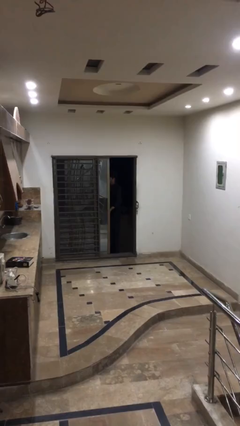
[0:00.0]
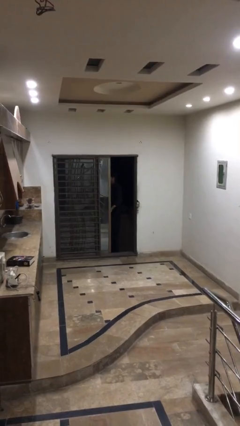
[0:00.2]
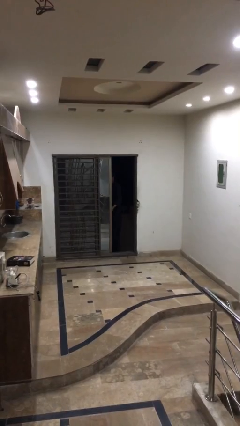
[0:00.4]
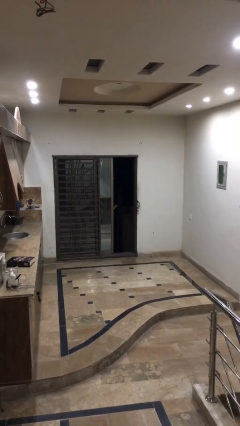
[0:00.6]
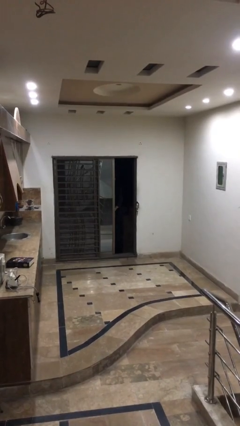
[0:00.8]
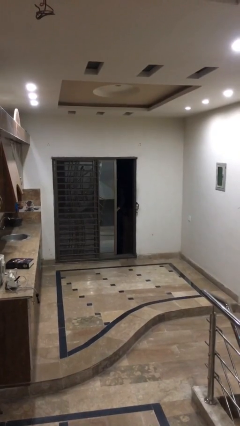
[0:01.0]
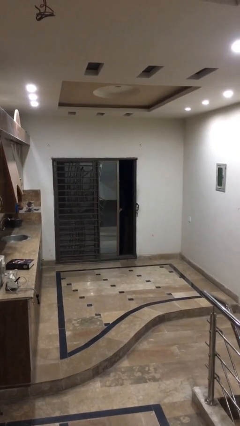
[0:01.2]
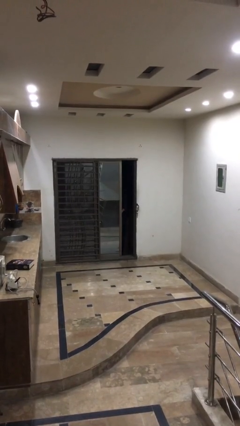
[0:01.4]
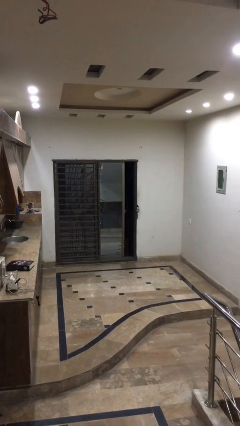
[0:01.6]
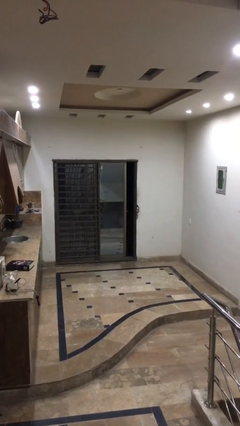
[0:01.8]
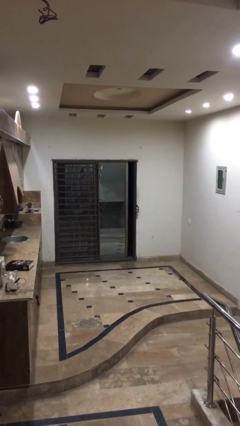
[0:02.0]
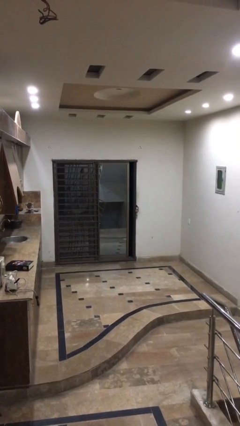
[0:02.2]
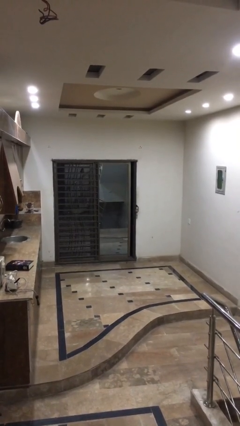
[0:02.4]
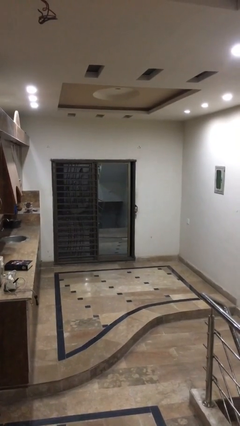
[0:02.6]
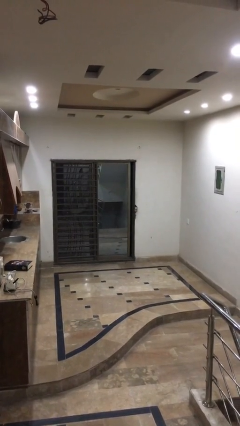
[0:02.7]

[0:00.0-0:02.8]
person closes facility door

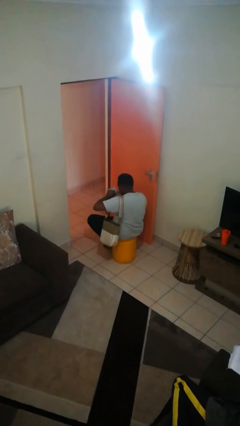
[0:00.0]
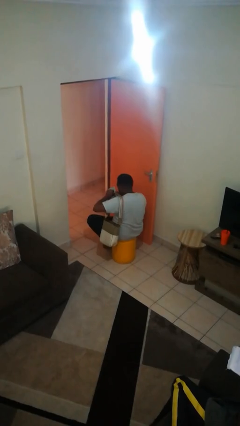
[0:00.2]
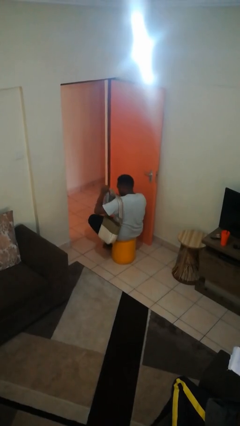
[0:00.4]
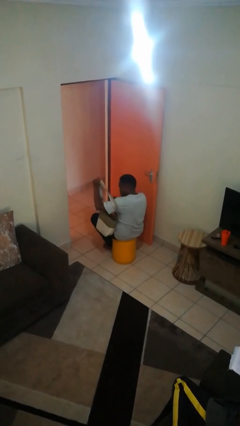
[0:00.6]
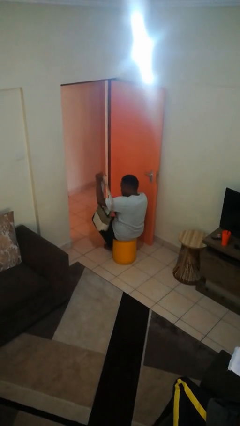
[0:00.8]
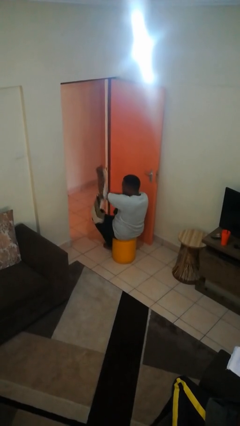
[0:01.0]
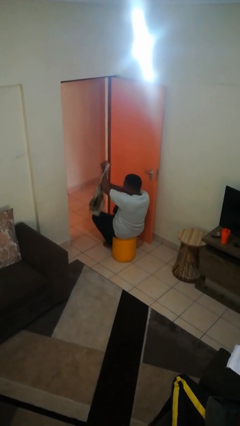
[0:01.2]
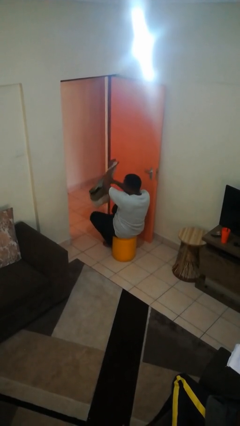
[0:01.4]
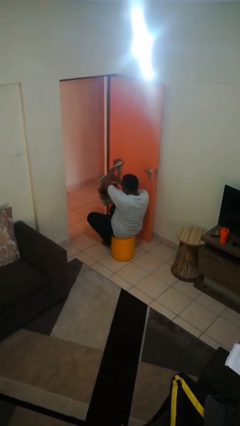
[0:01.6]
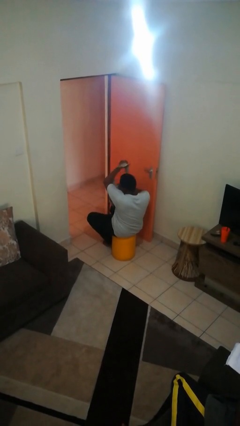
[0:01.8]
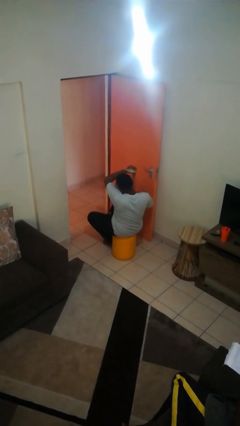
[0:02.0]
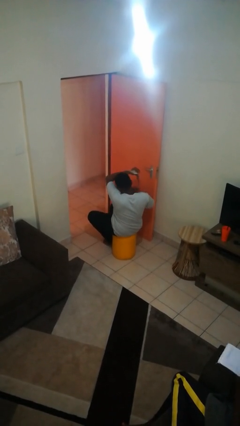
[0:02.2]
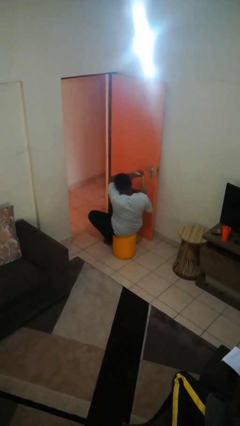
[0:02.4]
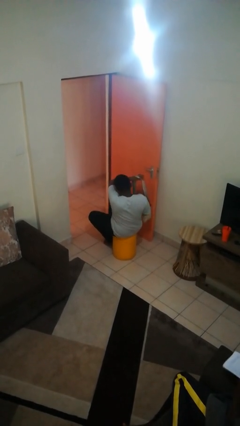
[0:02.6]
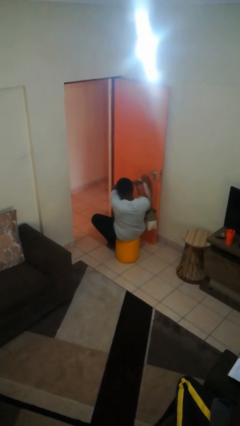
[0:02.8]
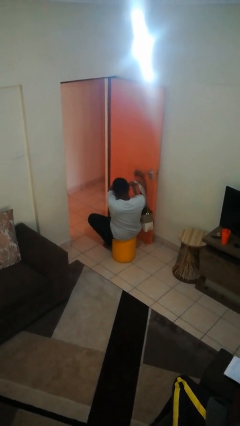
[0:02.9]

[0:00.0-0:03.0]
person puts object into purse

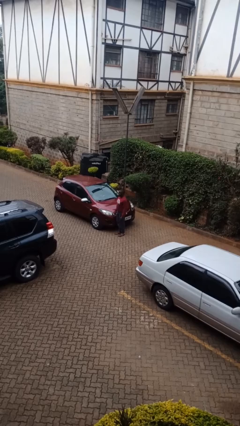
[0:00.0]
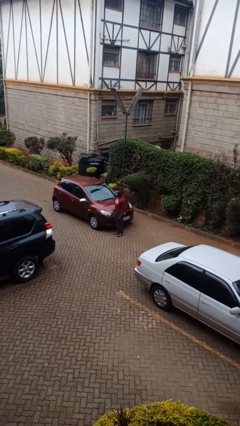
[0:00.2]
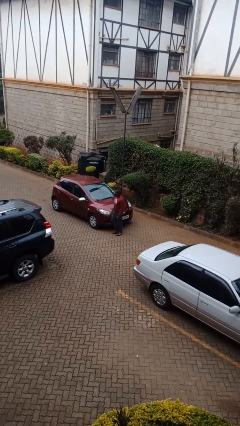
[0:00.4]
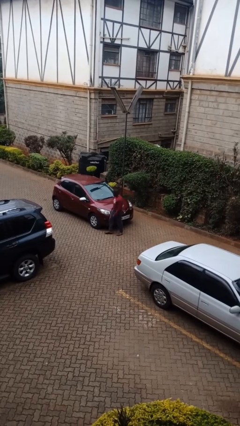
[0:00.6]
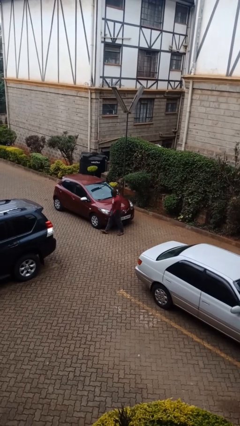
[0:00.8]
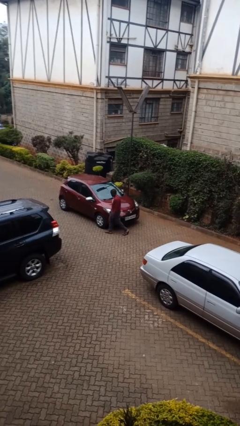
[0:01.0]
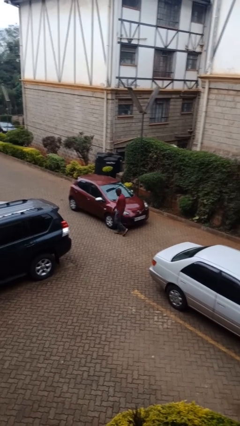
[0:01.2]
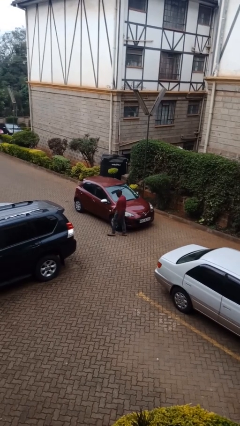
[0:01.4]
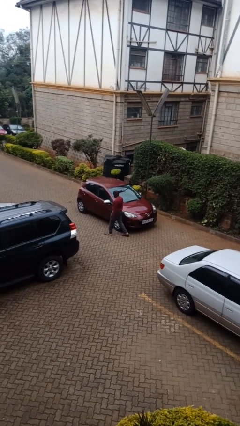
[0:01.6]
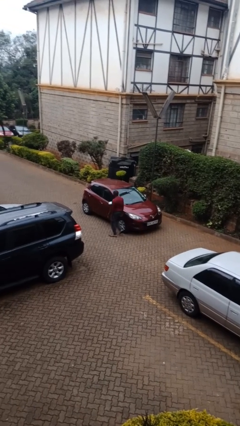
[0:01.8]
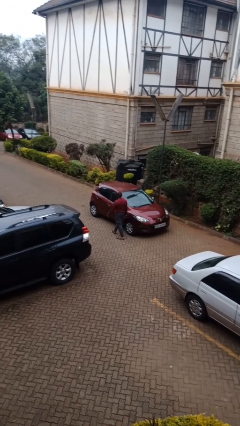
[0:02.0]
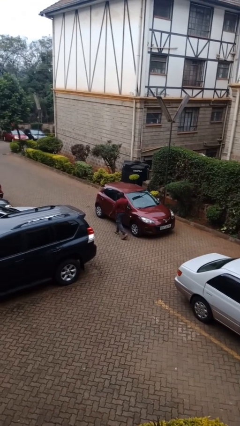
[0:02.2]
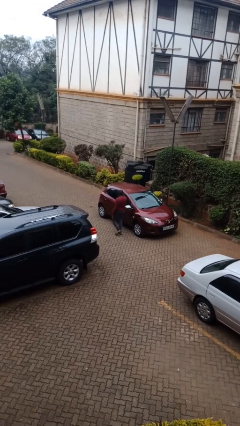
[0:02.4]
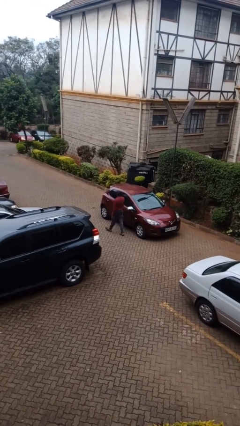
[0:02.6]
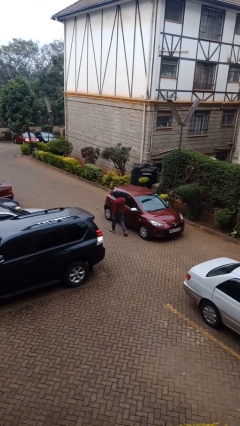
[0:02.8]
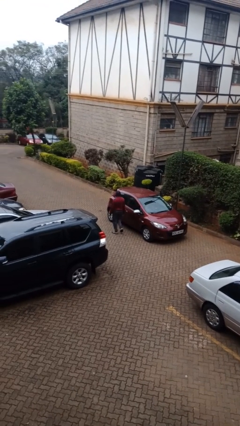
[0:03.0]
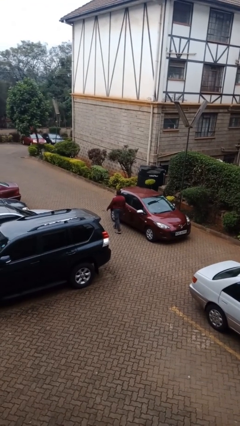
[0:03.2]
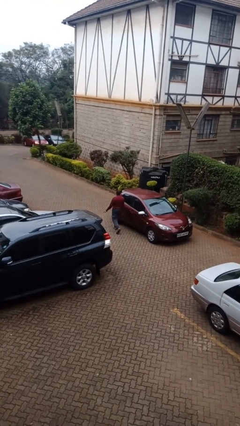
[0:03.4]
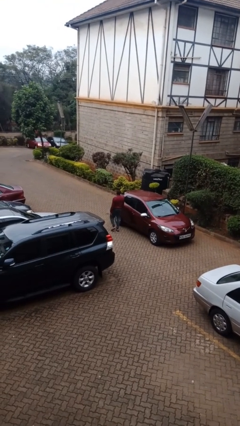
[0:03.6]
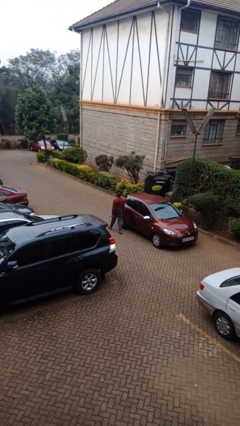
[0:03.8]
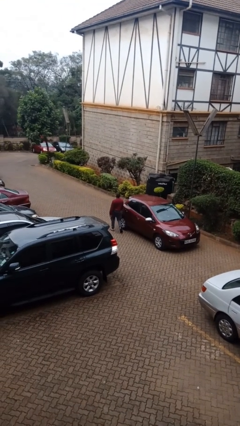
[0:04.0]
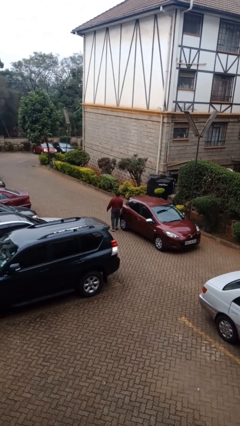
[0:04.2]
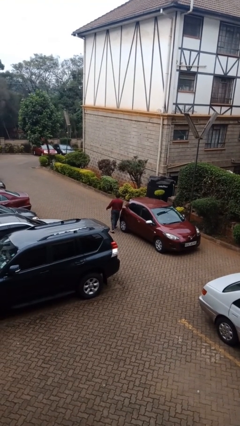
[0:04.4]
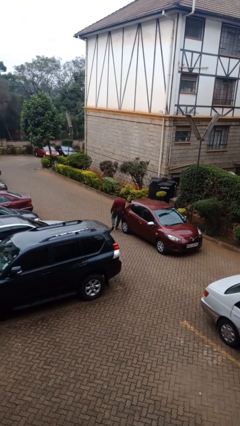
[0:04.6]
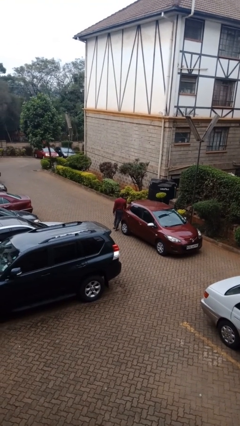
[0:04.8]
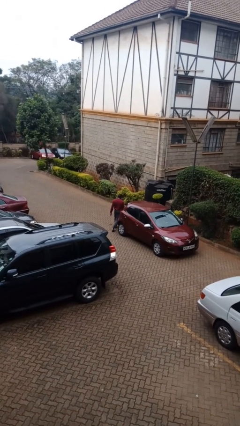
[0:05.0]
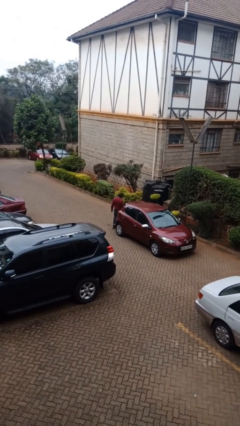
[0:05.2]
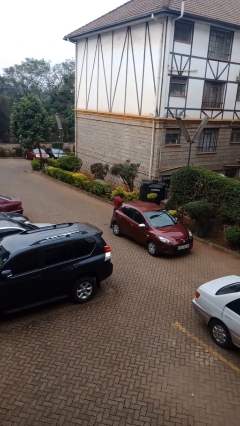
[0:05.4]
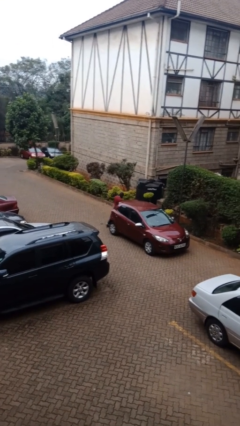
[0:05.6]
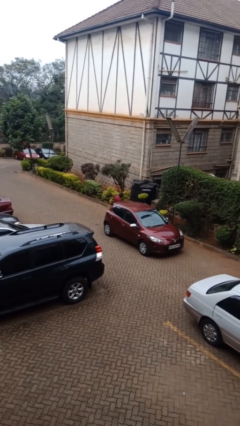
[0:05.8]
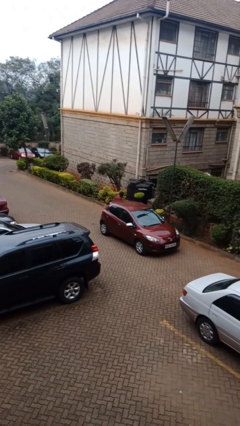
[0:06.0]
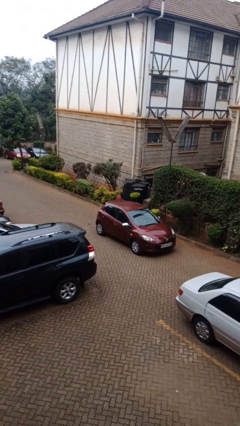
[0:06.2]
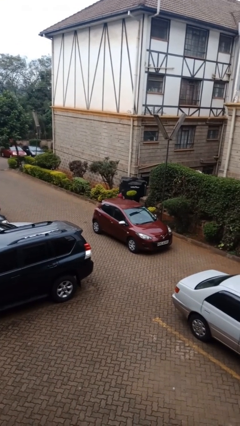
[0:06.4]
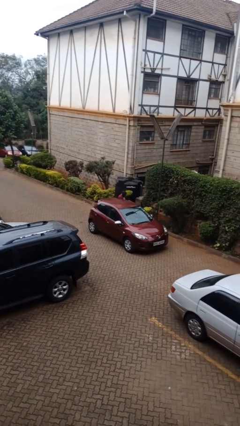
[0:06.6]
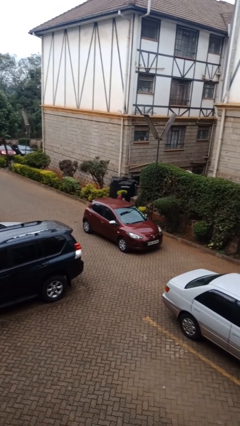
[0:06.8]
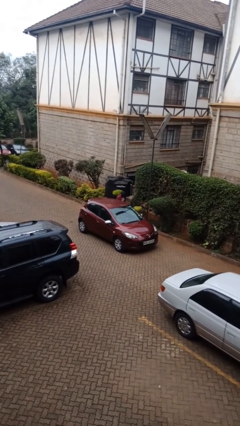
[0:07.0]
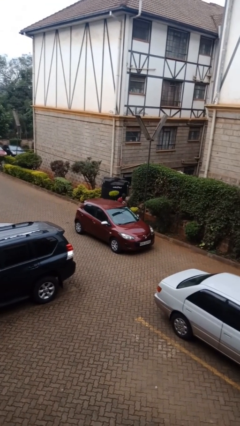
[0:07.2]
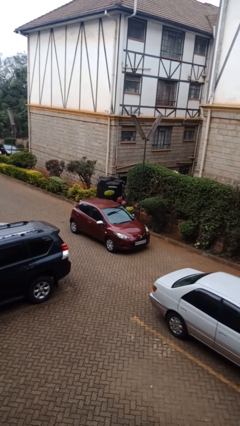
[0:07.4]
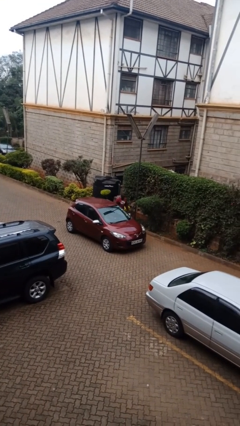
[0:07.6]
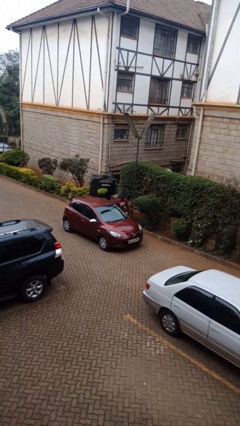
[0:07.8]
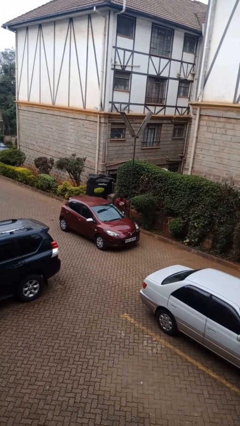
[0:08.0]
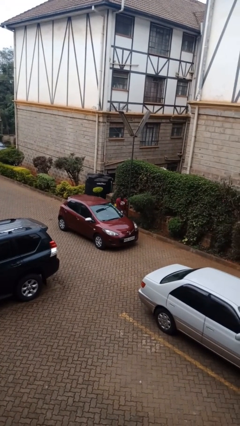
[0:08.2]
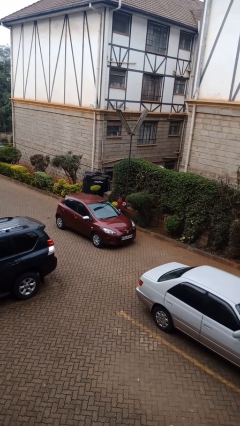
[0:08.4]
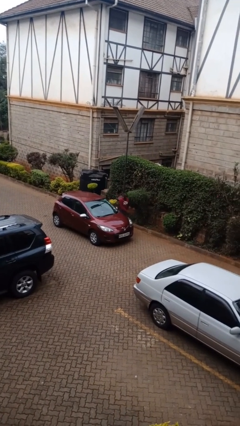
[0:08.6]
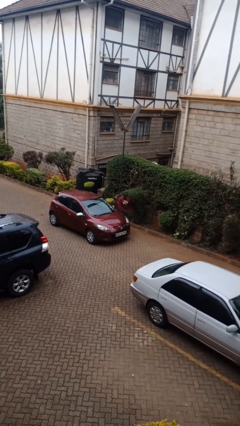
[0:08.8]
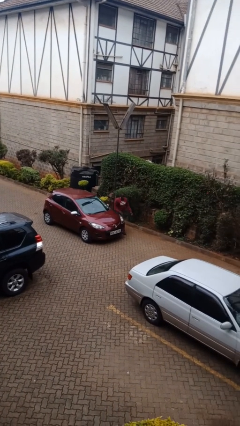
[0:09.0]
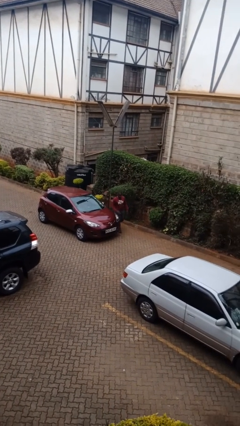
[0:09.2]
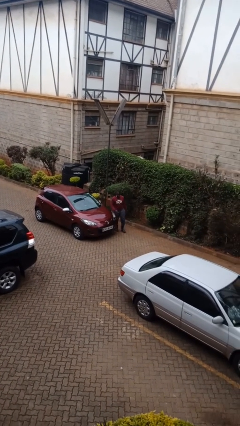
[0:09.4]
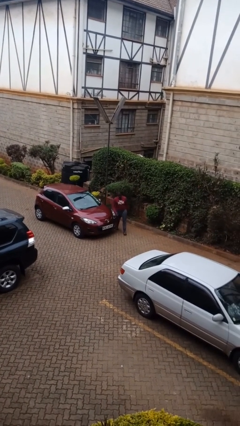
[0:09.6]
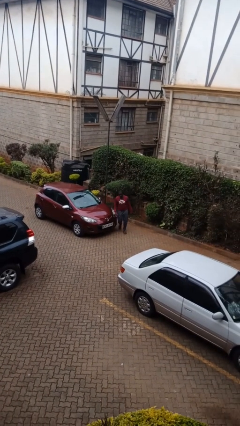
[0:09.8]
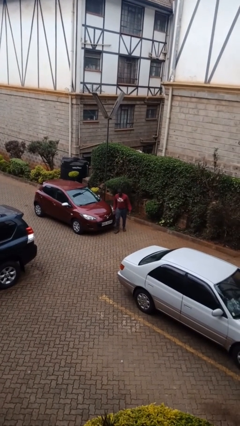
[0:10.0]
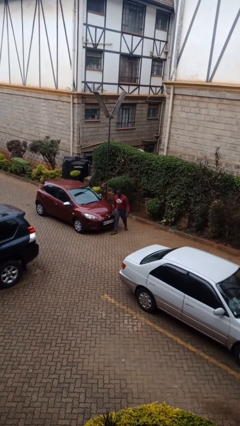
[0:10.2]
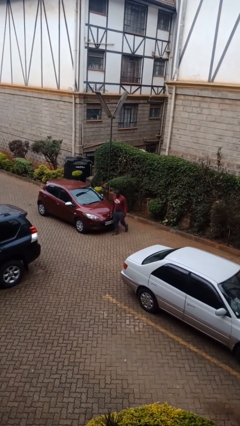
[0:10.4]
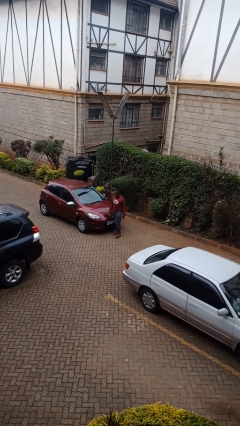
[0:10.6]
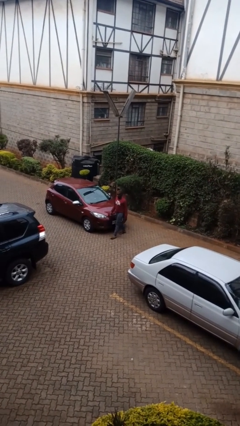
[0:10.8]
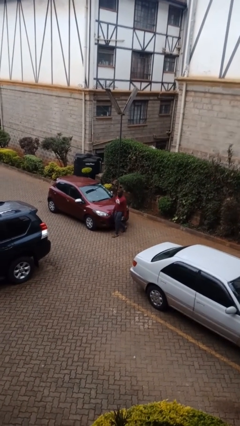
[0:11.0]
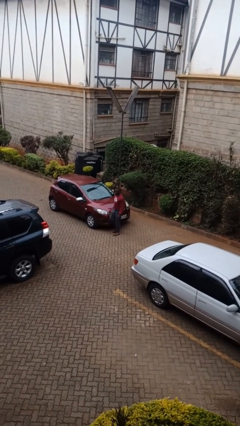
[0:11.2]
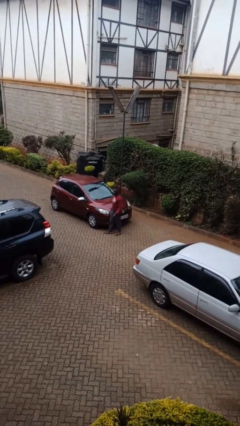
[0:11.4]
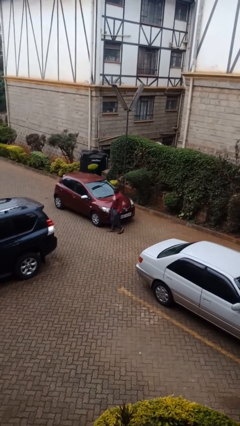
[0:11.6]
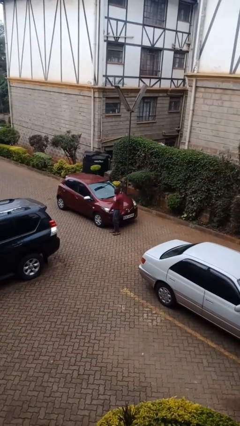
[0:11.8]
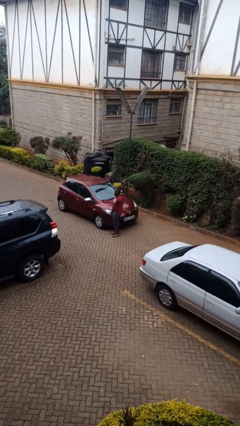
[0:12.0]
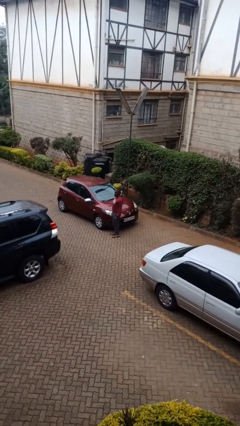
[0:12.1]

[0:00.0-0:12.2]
person walks around car
